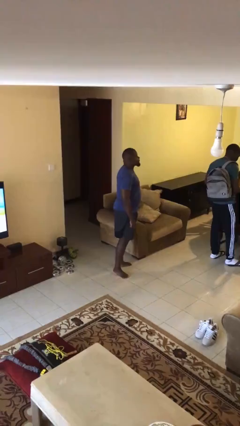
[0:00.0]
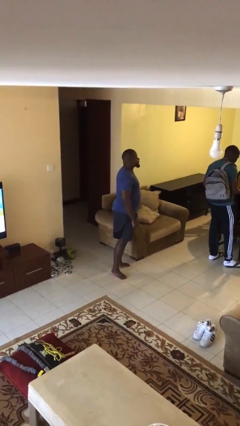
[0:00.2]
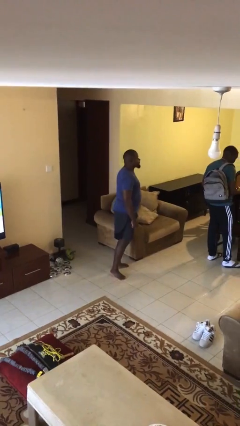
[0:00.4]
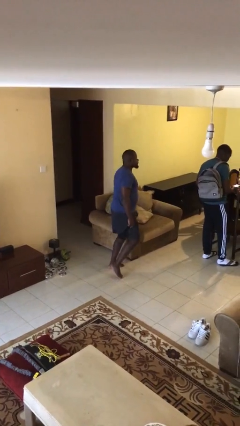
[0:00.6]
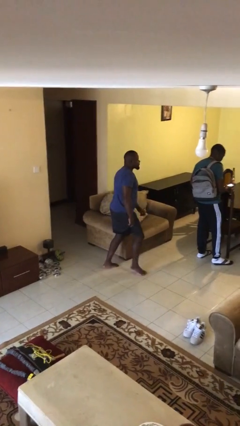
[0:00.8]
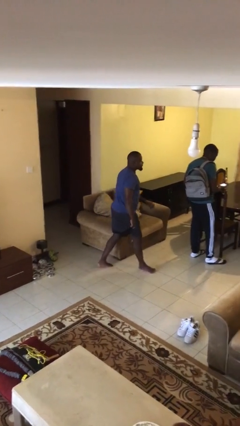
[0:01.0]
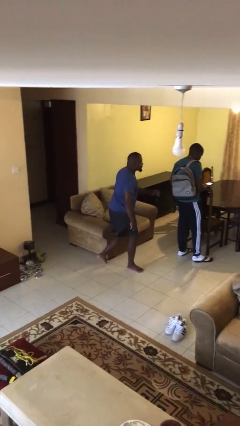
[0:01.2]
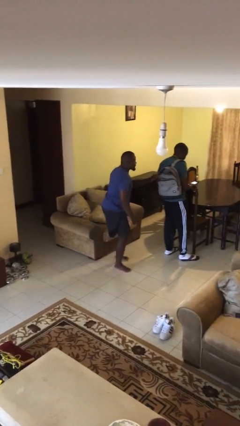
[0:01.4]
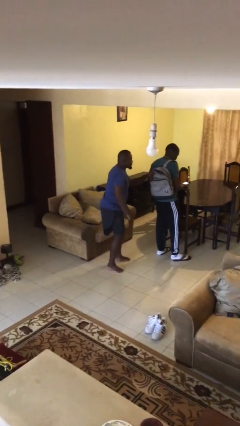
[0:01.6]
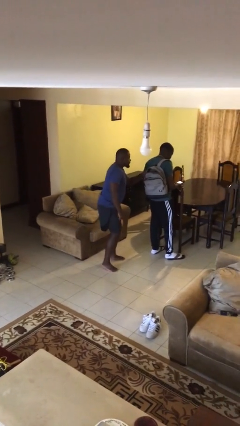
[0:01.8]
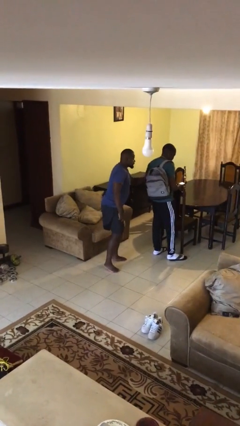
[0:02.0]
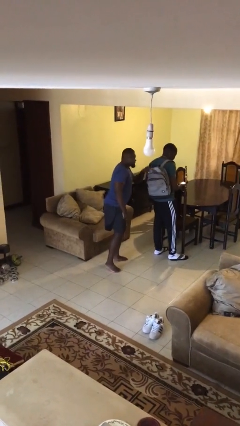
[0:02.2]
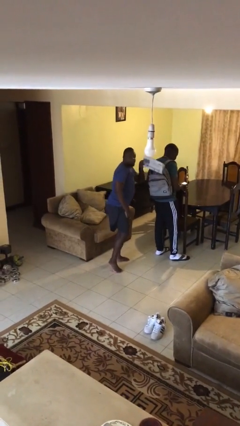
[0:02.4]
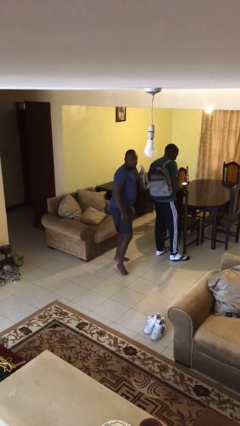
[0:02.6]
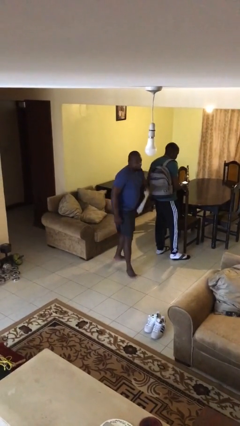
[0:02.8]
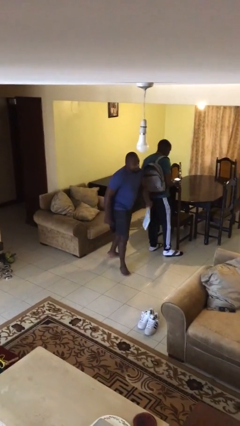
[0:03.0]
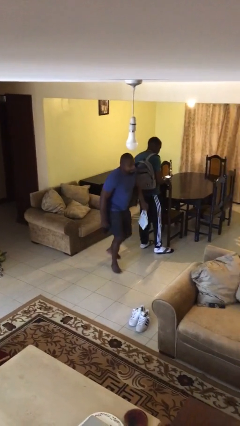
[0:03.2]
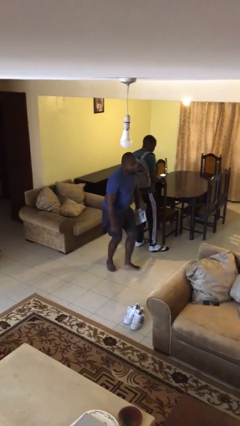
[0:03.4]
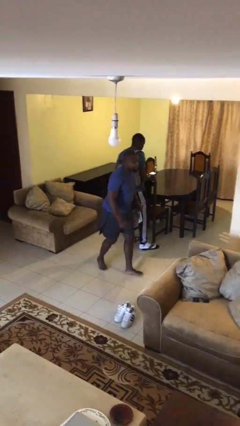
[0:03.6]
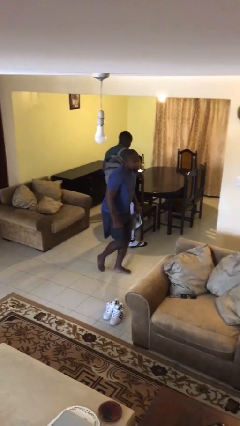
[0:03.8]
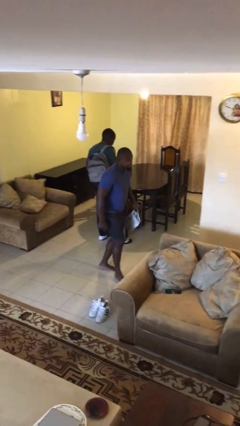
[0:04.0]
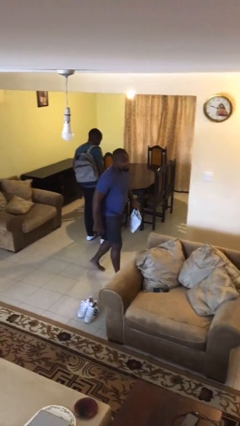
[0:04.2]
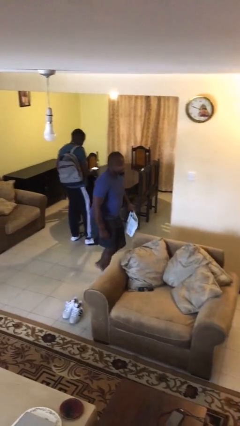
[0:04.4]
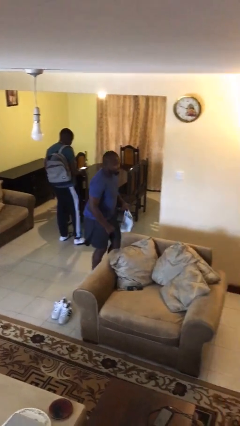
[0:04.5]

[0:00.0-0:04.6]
person steals object from person

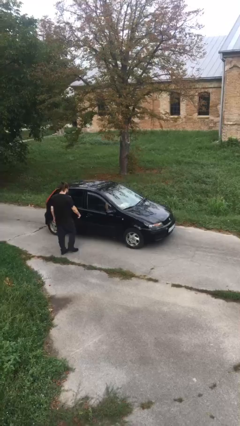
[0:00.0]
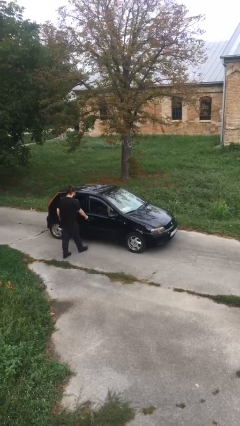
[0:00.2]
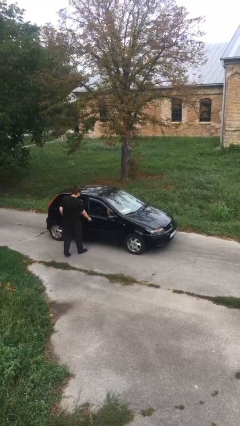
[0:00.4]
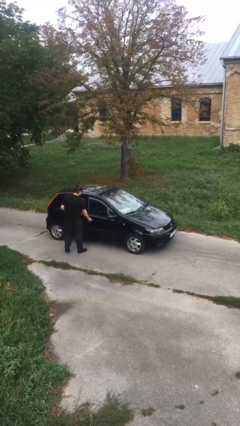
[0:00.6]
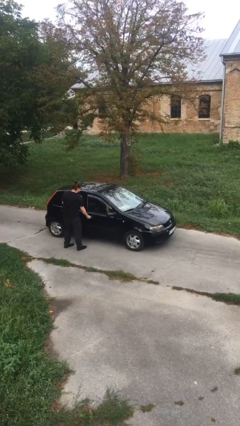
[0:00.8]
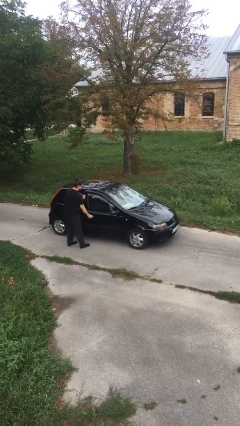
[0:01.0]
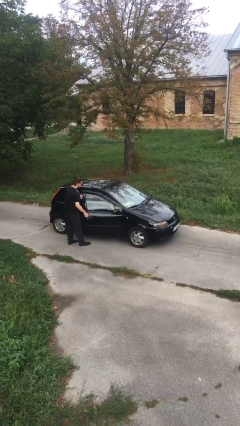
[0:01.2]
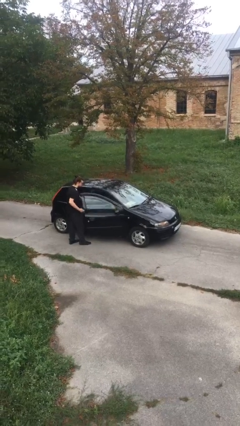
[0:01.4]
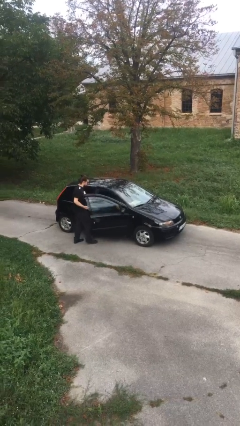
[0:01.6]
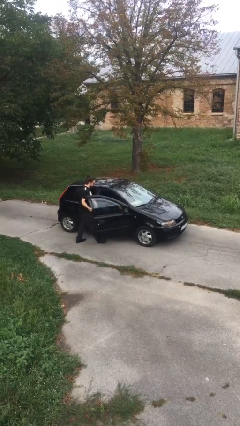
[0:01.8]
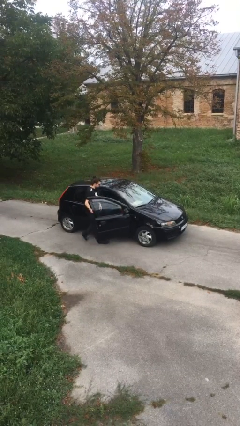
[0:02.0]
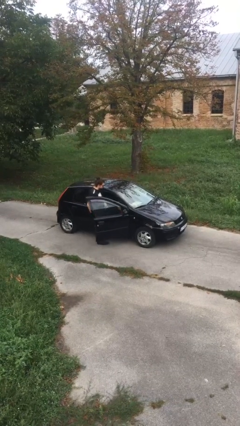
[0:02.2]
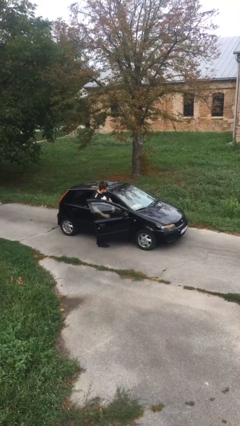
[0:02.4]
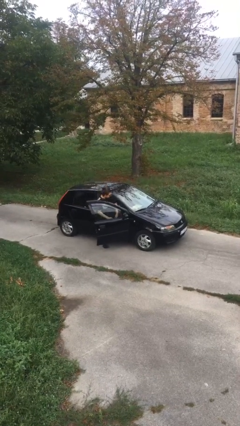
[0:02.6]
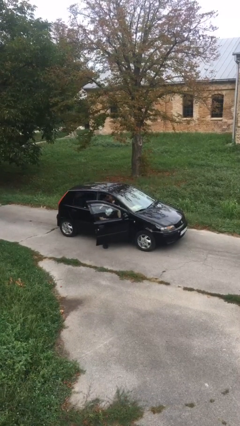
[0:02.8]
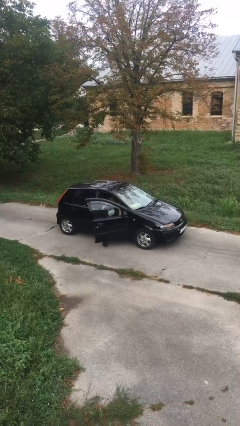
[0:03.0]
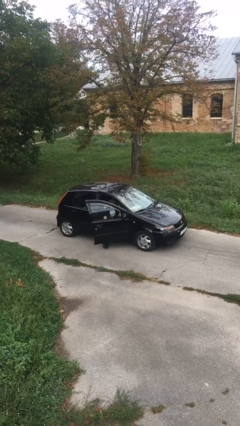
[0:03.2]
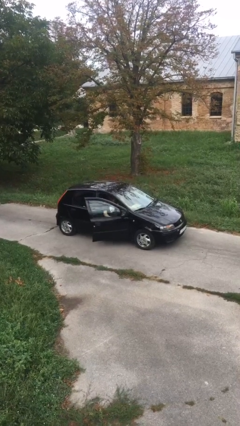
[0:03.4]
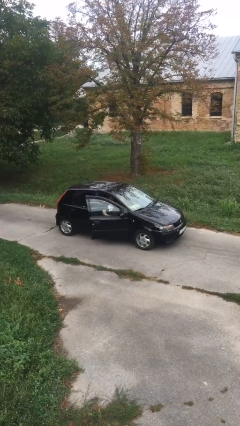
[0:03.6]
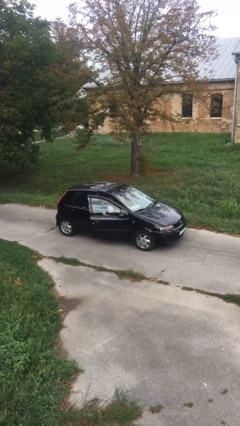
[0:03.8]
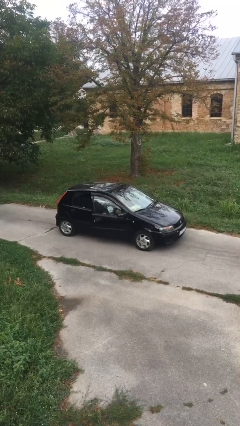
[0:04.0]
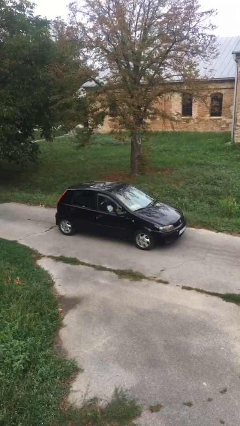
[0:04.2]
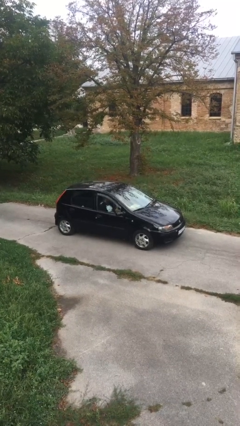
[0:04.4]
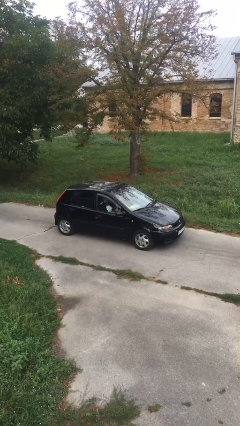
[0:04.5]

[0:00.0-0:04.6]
car picks up person

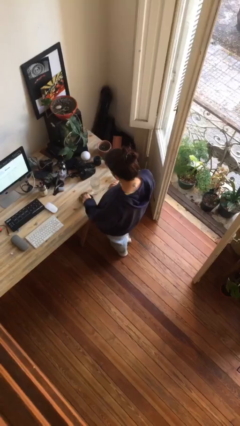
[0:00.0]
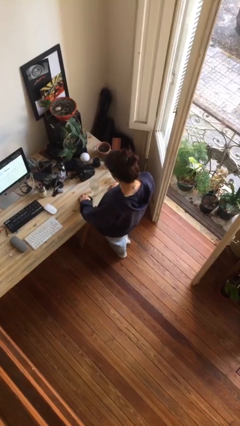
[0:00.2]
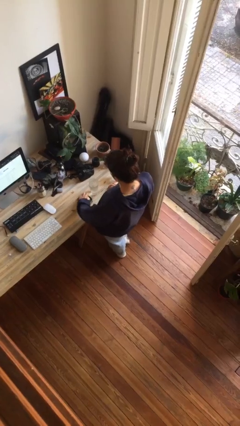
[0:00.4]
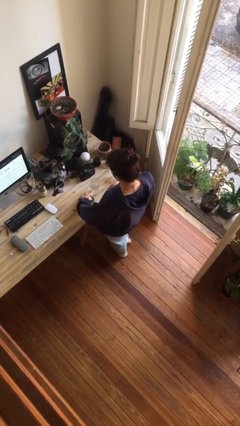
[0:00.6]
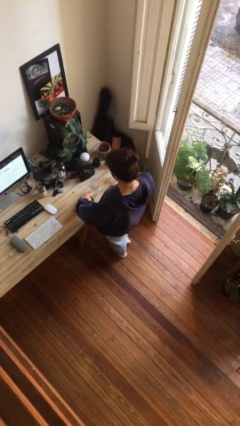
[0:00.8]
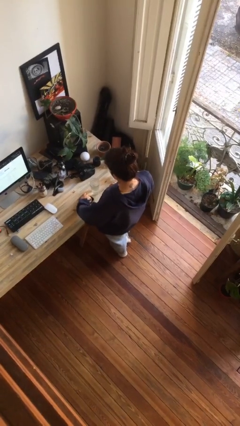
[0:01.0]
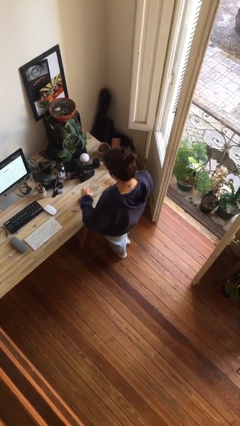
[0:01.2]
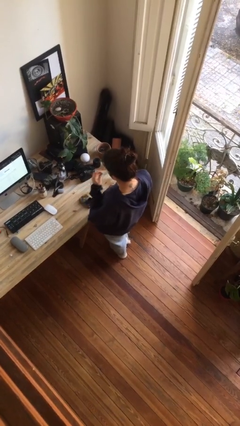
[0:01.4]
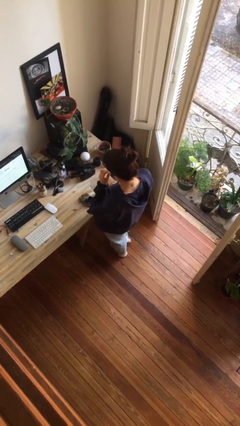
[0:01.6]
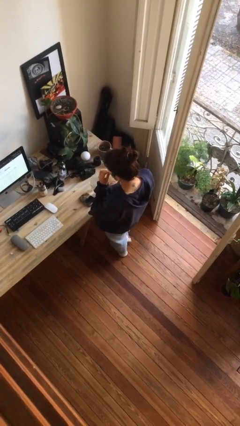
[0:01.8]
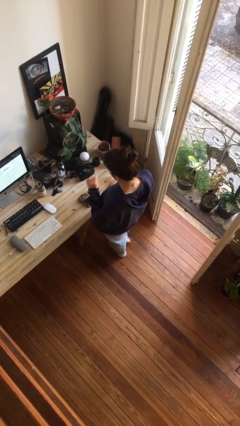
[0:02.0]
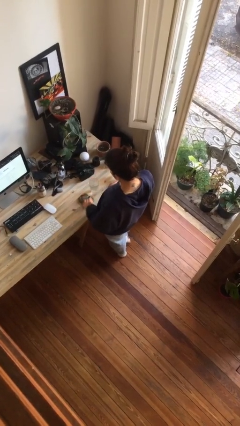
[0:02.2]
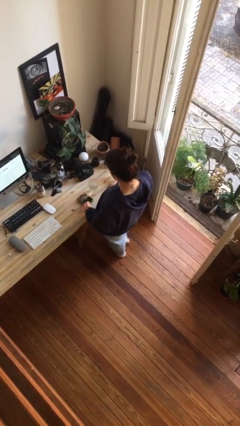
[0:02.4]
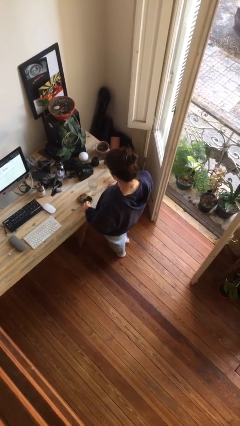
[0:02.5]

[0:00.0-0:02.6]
person takes medicine pills

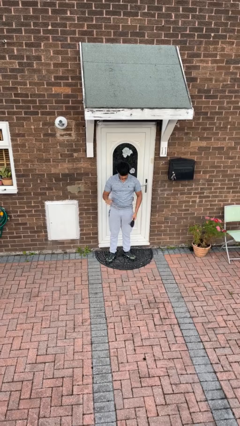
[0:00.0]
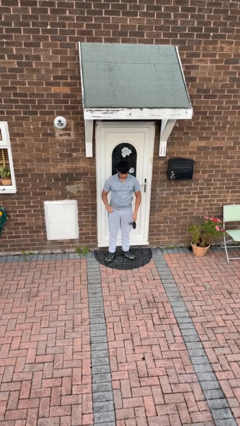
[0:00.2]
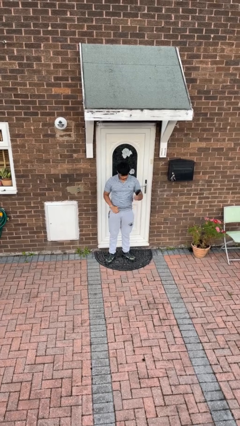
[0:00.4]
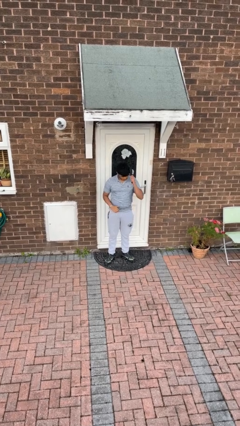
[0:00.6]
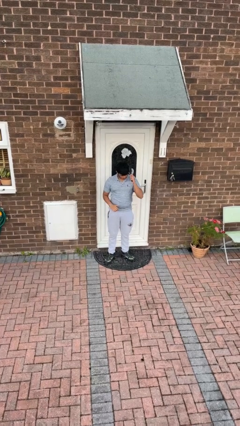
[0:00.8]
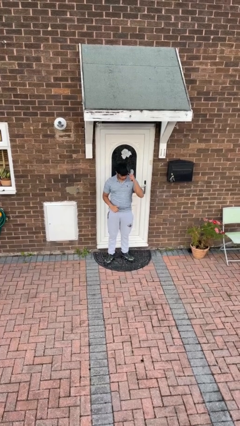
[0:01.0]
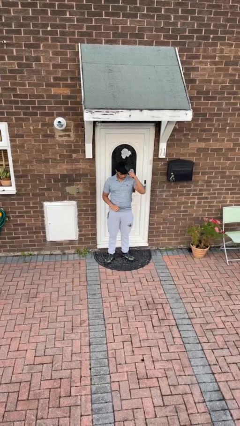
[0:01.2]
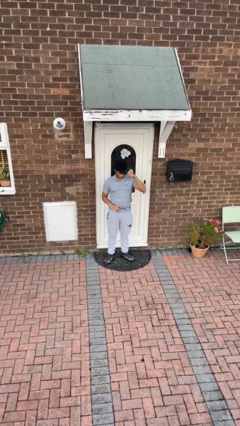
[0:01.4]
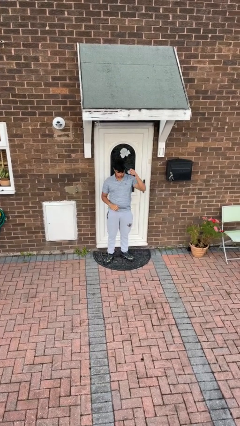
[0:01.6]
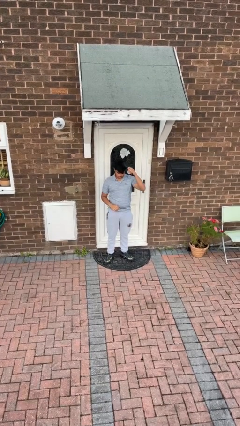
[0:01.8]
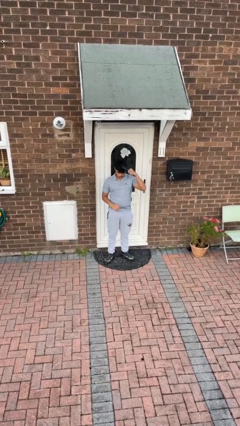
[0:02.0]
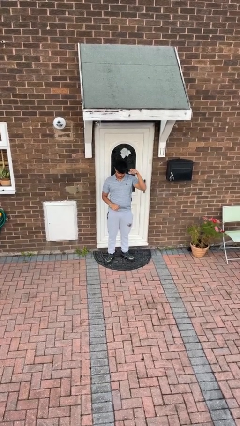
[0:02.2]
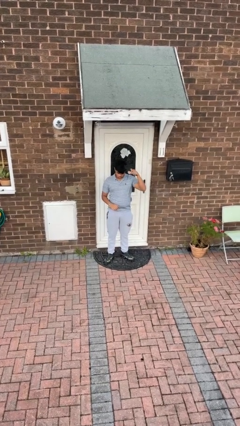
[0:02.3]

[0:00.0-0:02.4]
person brushes hair

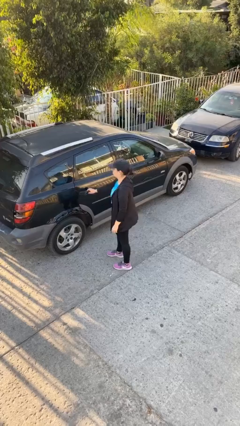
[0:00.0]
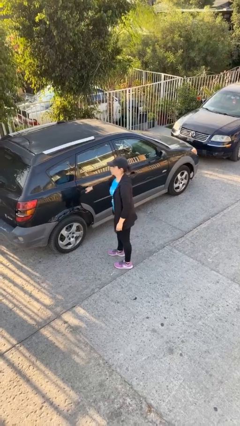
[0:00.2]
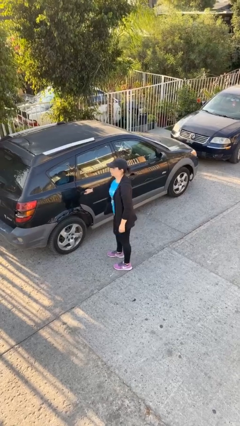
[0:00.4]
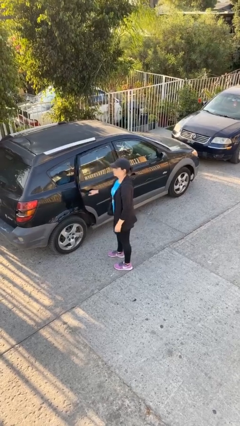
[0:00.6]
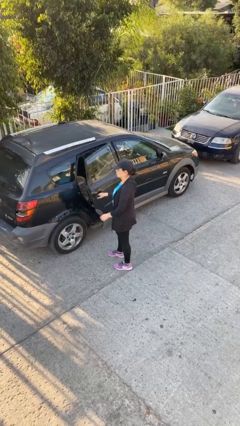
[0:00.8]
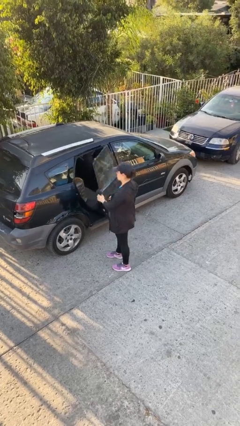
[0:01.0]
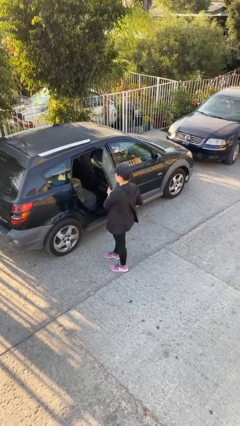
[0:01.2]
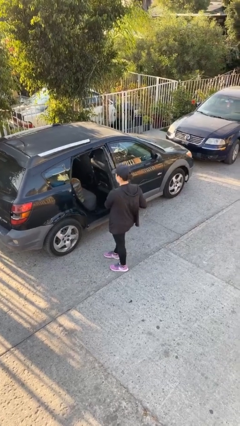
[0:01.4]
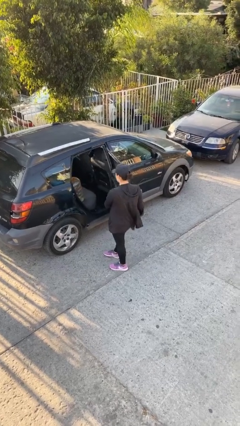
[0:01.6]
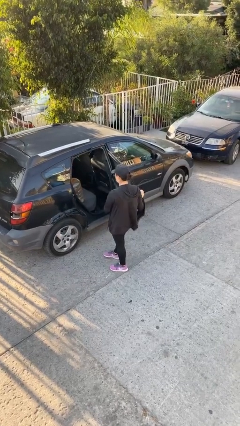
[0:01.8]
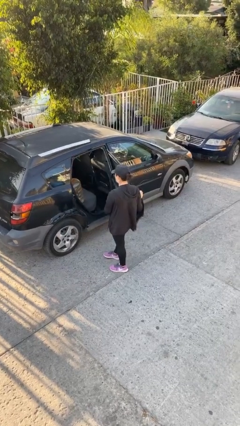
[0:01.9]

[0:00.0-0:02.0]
person opens car door

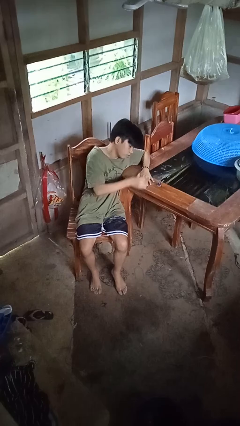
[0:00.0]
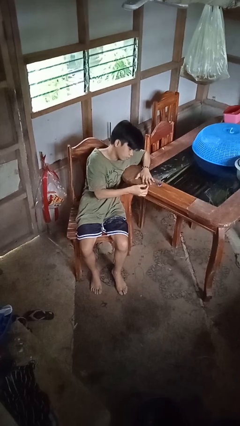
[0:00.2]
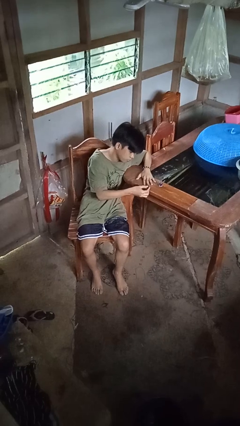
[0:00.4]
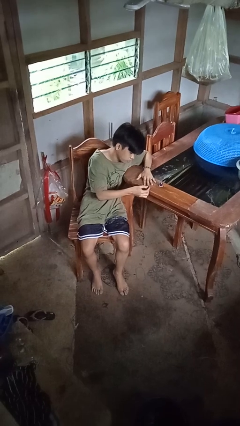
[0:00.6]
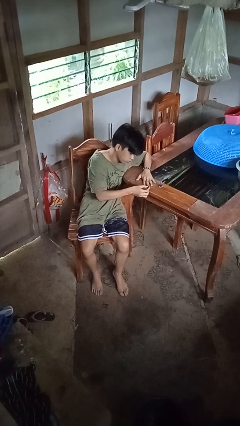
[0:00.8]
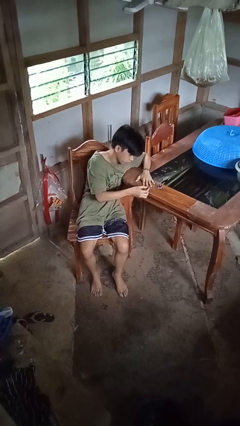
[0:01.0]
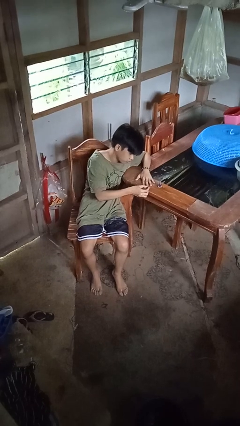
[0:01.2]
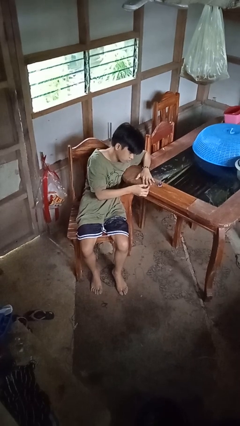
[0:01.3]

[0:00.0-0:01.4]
person paints fingernails
